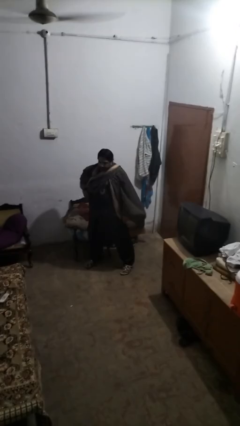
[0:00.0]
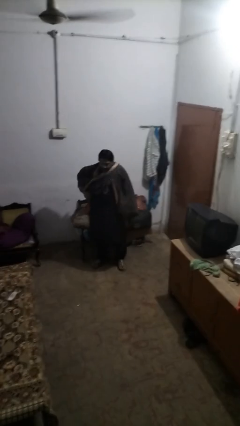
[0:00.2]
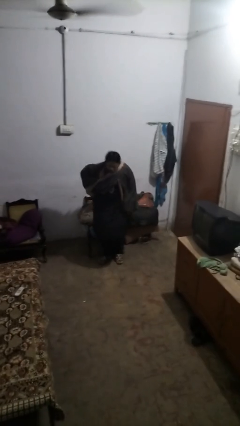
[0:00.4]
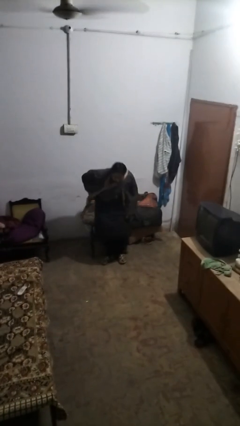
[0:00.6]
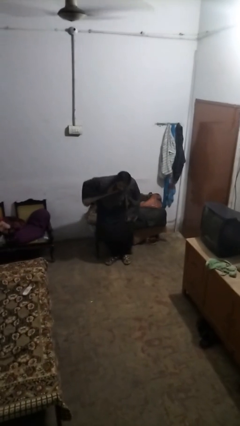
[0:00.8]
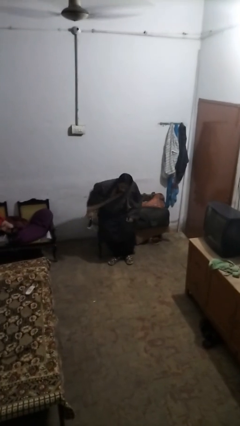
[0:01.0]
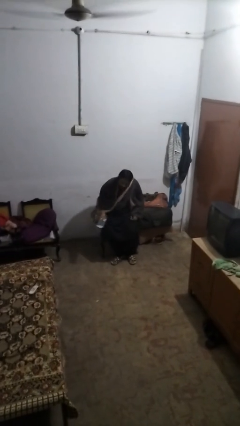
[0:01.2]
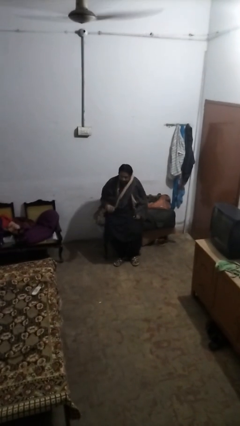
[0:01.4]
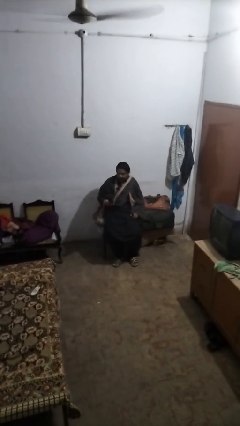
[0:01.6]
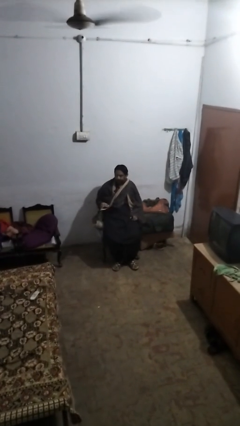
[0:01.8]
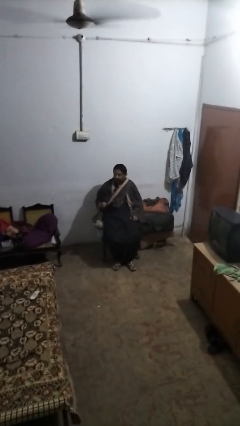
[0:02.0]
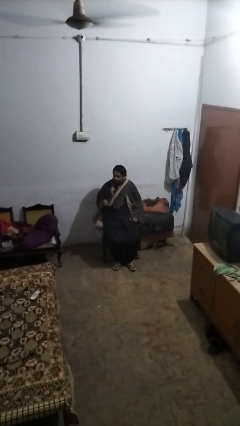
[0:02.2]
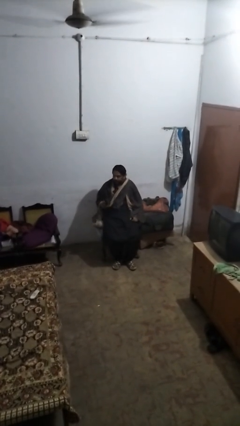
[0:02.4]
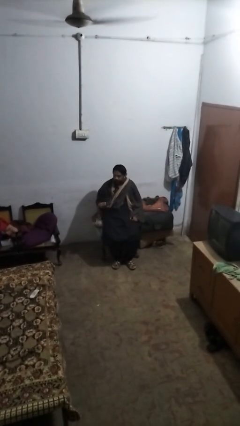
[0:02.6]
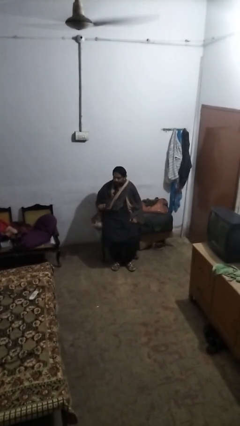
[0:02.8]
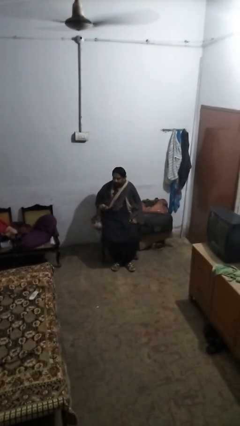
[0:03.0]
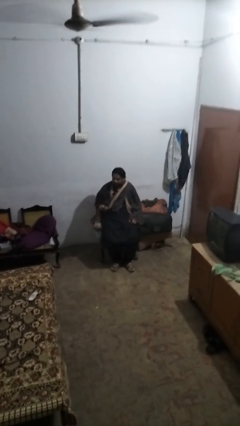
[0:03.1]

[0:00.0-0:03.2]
person takes phone from pocket

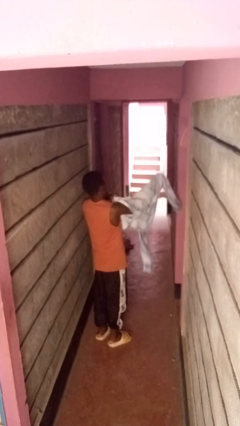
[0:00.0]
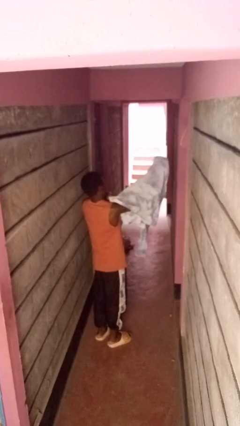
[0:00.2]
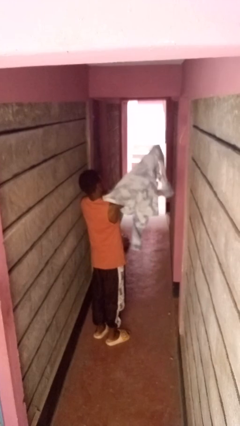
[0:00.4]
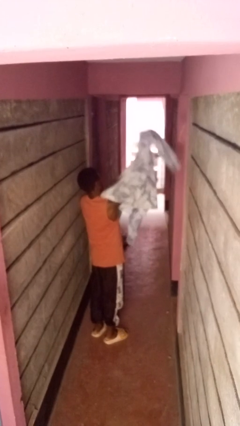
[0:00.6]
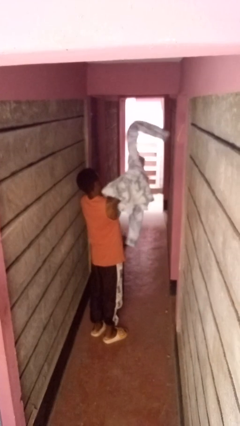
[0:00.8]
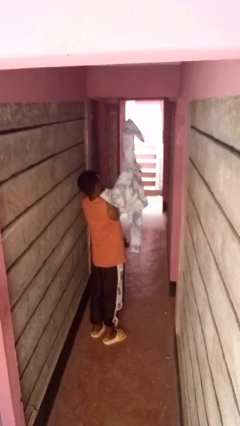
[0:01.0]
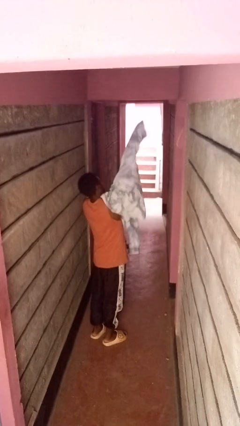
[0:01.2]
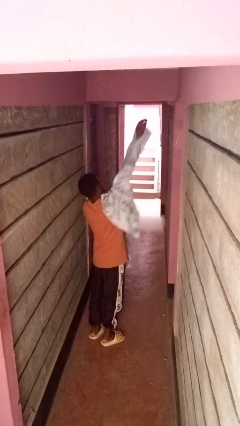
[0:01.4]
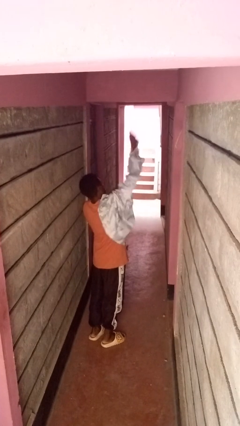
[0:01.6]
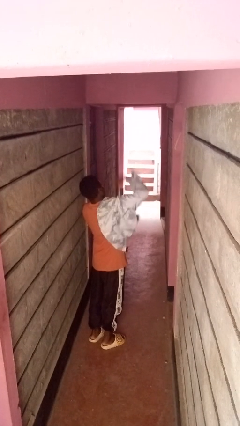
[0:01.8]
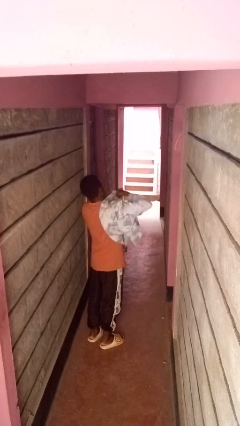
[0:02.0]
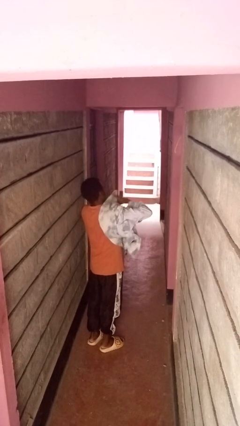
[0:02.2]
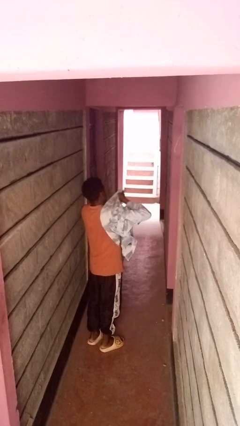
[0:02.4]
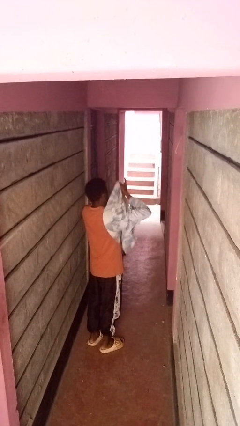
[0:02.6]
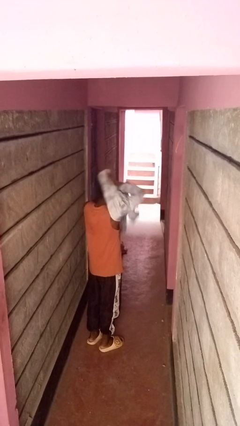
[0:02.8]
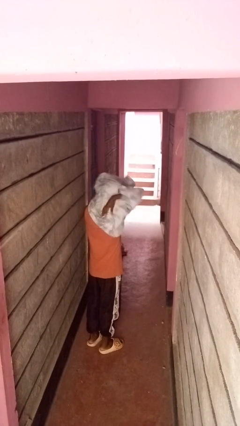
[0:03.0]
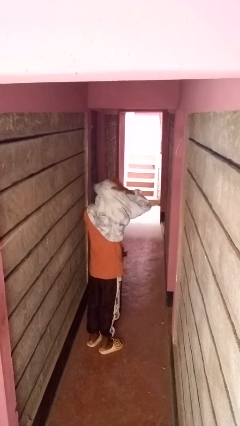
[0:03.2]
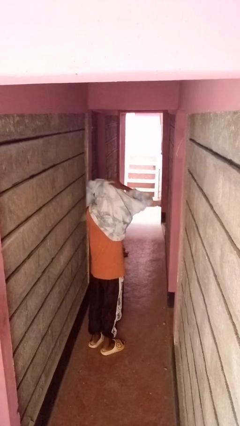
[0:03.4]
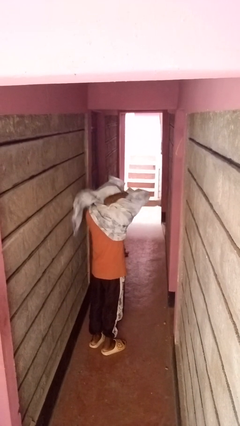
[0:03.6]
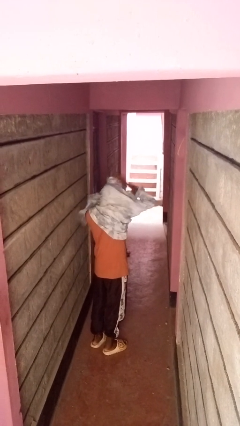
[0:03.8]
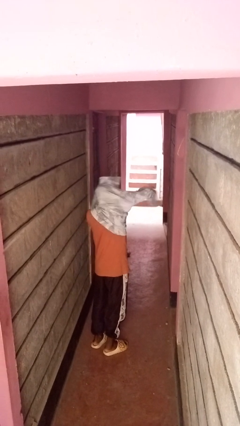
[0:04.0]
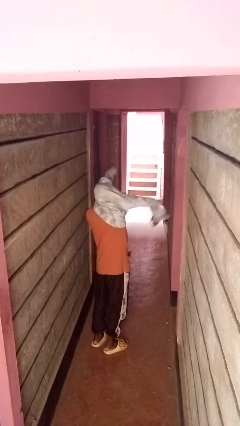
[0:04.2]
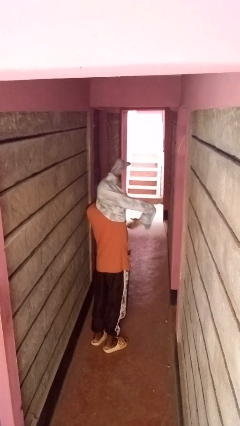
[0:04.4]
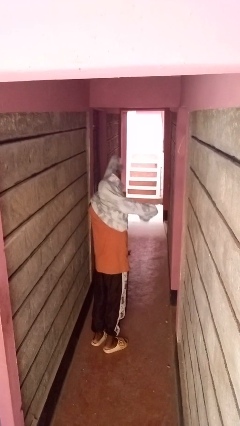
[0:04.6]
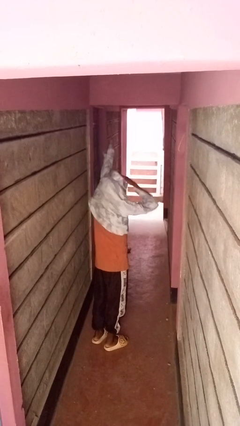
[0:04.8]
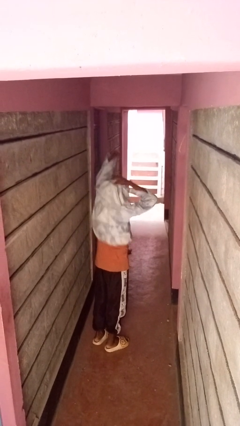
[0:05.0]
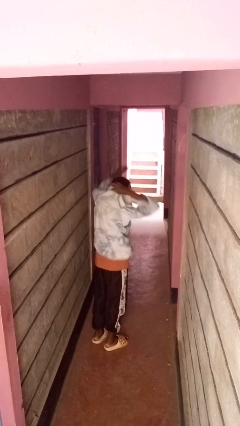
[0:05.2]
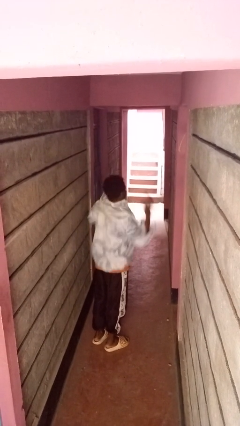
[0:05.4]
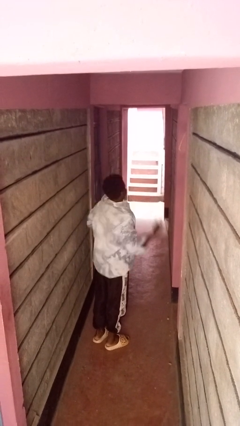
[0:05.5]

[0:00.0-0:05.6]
person puts on shirt

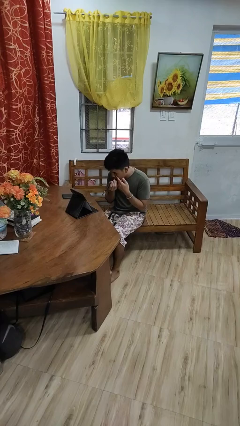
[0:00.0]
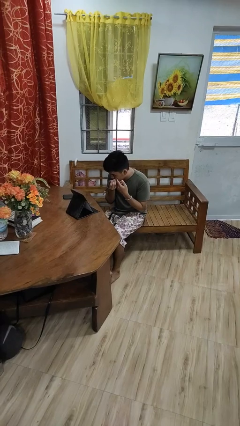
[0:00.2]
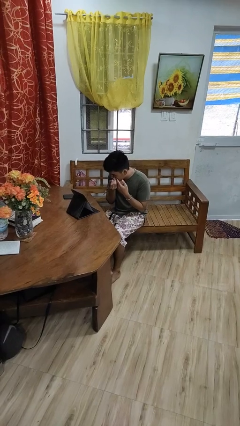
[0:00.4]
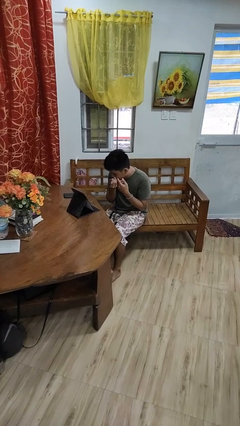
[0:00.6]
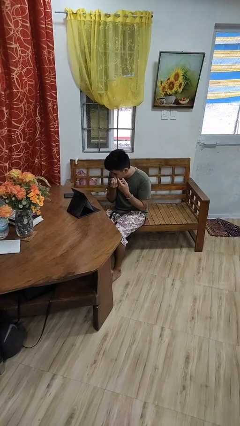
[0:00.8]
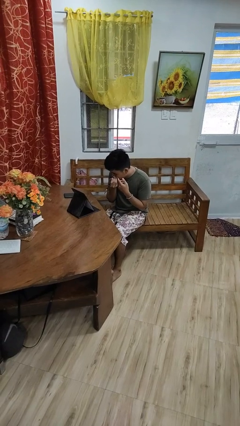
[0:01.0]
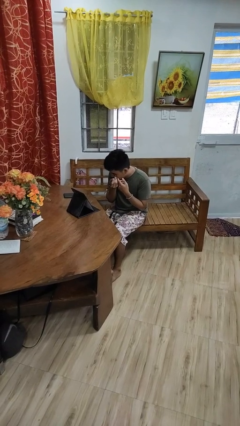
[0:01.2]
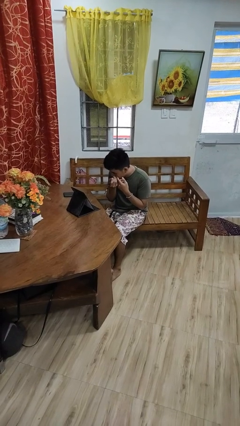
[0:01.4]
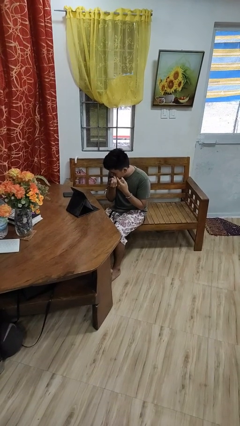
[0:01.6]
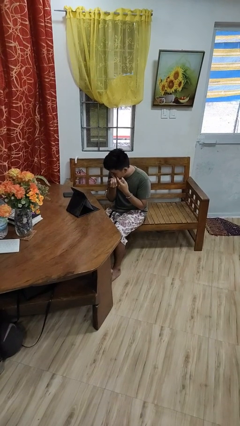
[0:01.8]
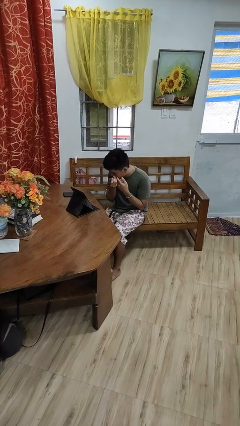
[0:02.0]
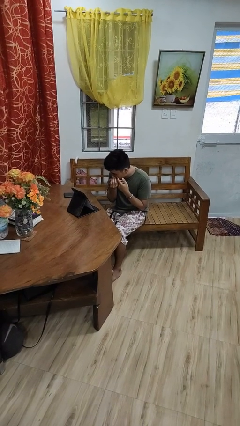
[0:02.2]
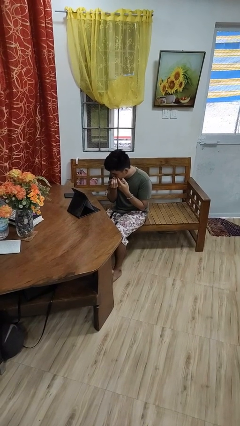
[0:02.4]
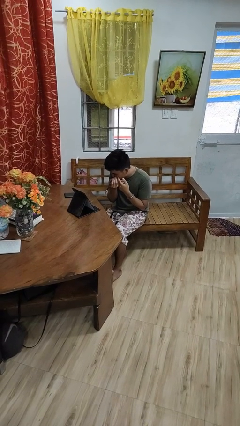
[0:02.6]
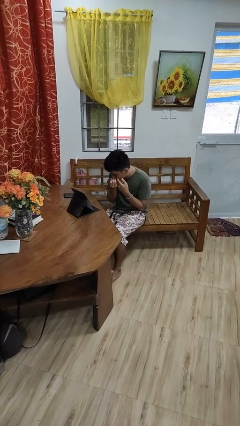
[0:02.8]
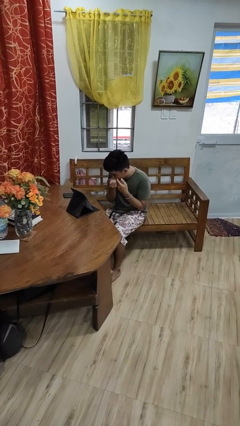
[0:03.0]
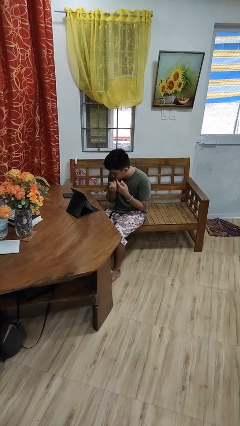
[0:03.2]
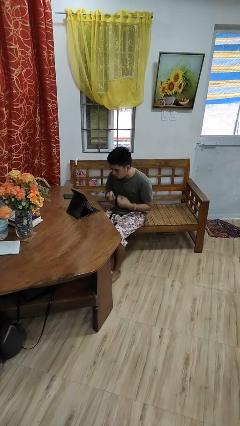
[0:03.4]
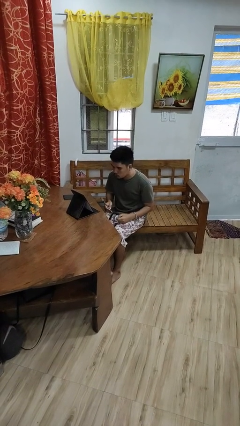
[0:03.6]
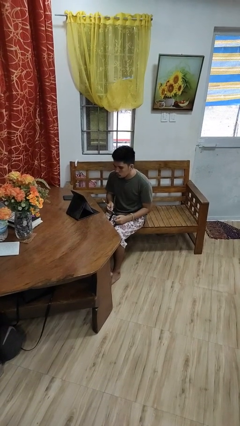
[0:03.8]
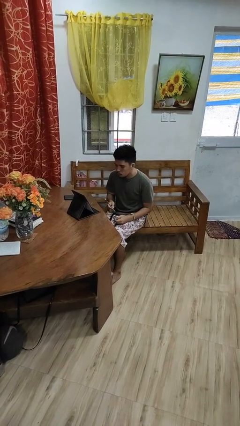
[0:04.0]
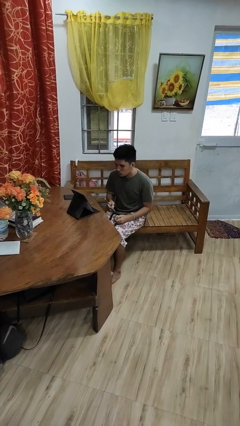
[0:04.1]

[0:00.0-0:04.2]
person applies eye makeup

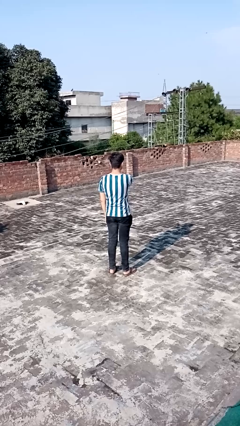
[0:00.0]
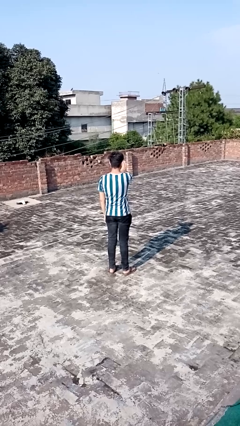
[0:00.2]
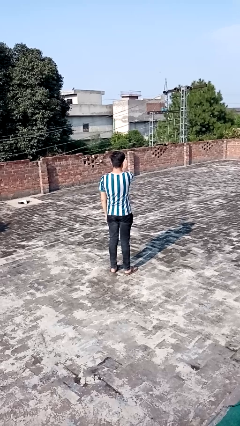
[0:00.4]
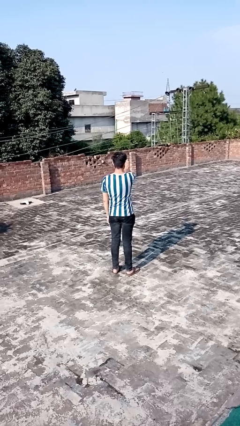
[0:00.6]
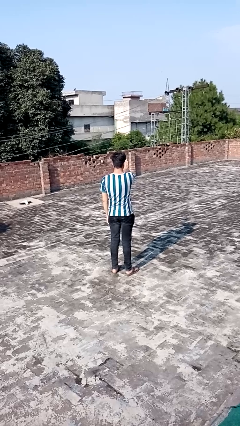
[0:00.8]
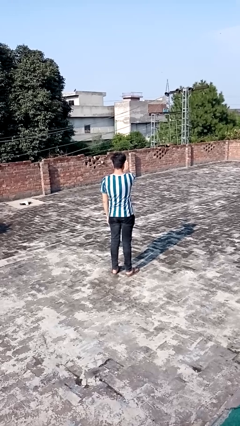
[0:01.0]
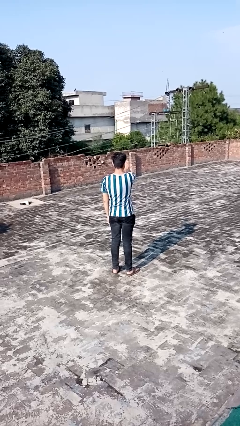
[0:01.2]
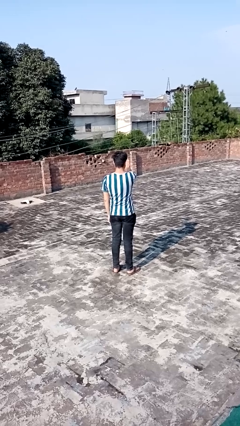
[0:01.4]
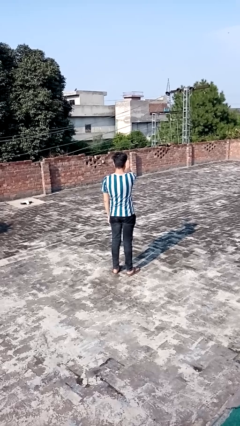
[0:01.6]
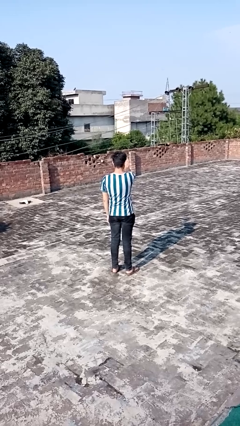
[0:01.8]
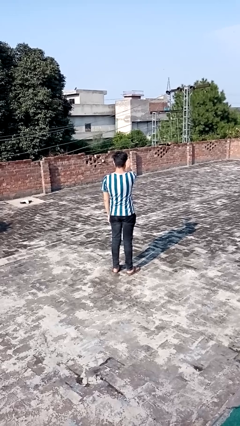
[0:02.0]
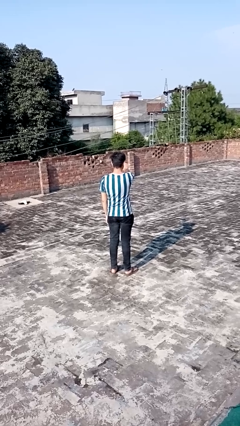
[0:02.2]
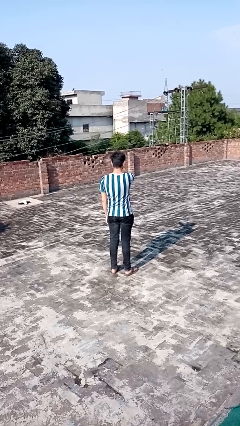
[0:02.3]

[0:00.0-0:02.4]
person gestures stop

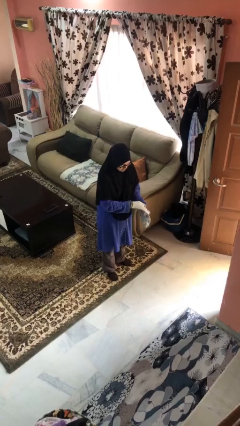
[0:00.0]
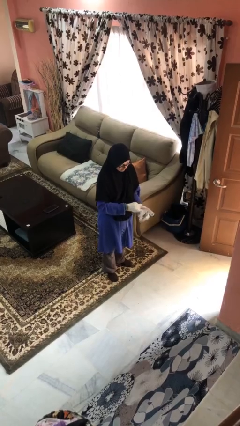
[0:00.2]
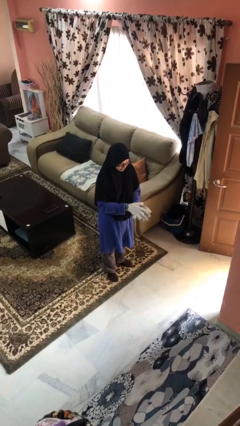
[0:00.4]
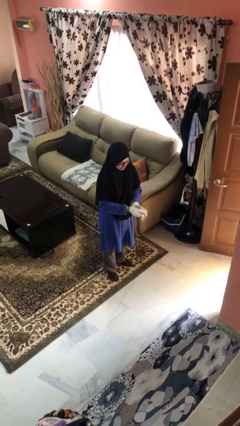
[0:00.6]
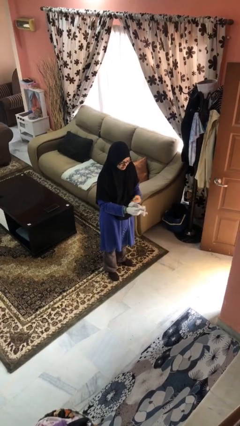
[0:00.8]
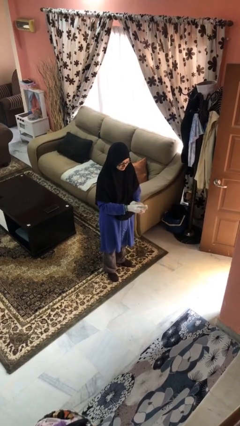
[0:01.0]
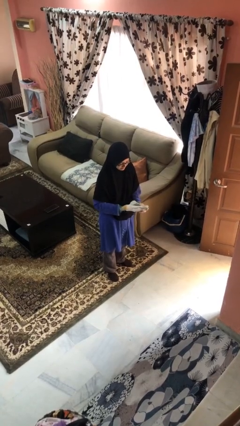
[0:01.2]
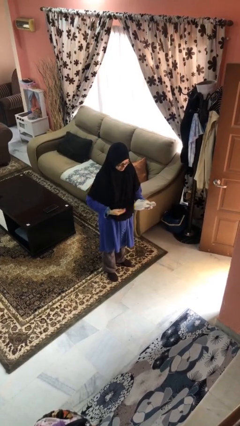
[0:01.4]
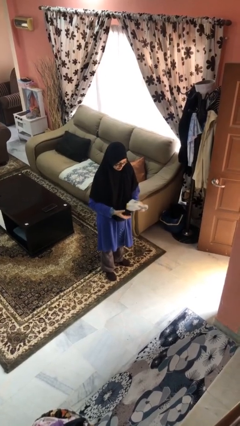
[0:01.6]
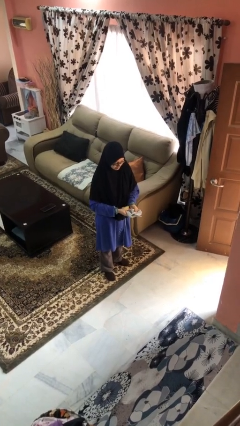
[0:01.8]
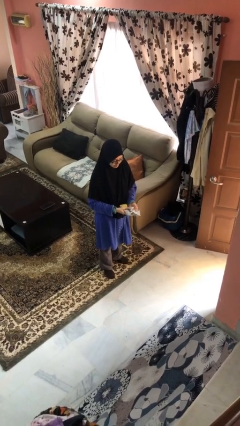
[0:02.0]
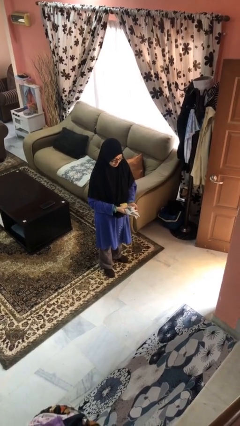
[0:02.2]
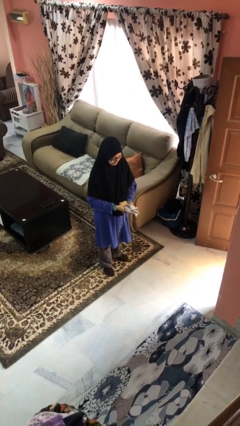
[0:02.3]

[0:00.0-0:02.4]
person takes off gloves
